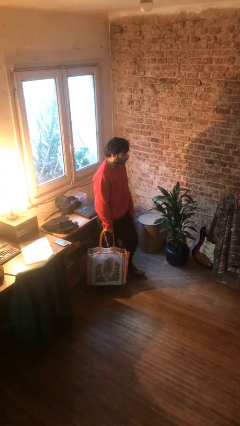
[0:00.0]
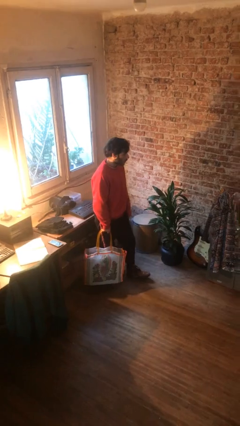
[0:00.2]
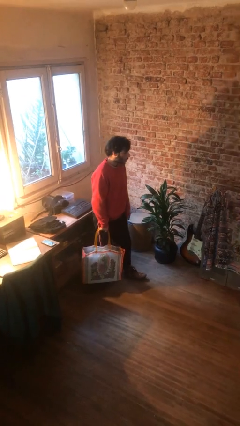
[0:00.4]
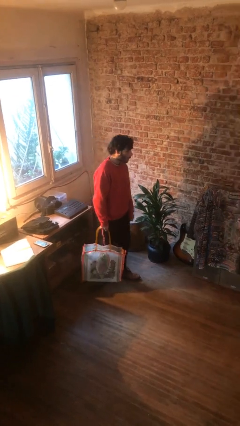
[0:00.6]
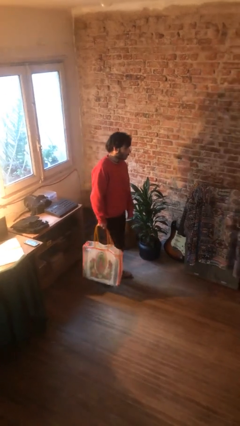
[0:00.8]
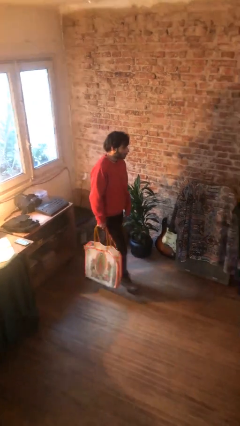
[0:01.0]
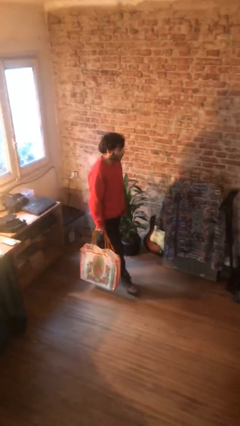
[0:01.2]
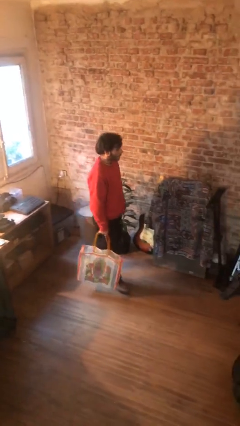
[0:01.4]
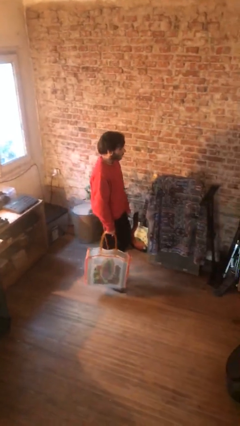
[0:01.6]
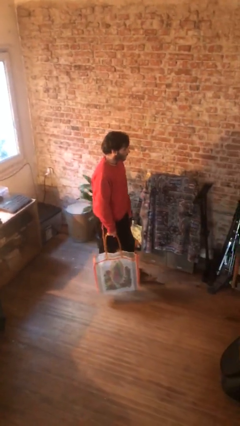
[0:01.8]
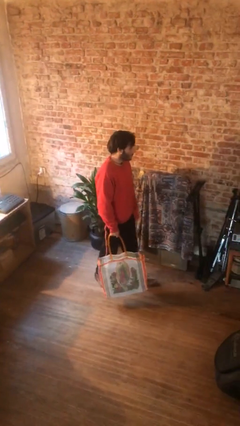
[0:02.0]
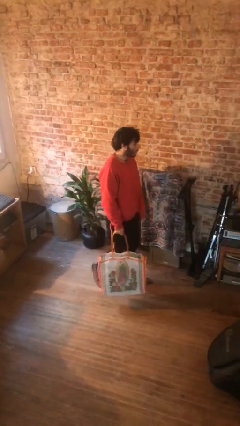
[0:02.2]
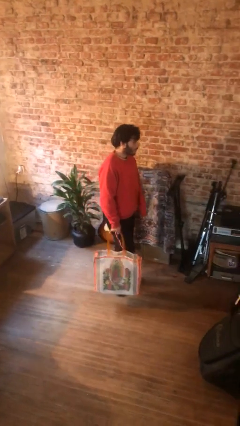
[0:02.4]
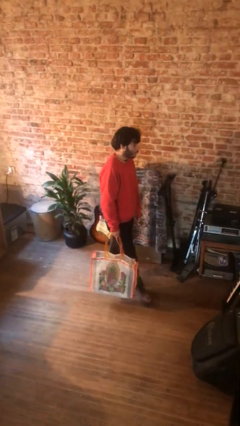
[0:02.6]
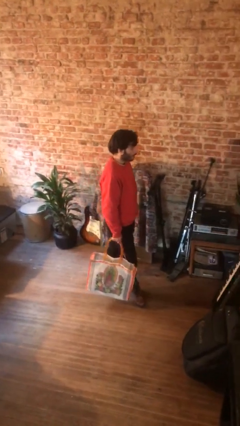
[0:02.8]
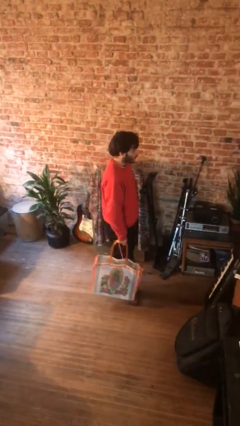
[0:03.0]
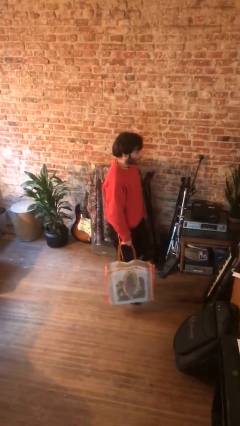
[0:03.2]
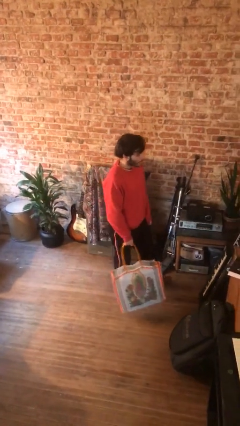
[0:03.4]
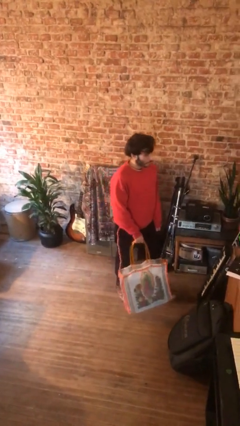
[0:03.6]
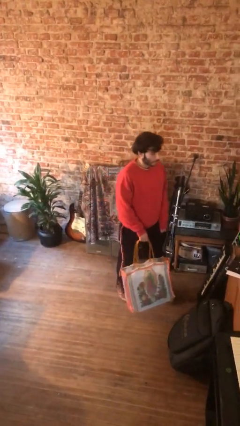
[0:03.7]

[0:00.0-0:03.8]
person carries groceries

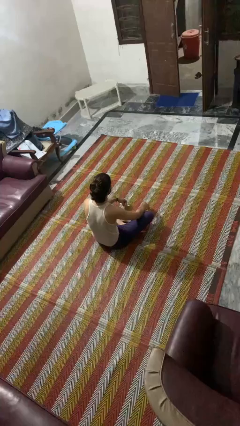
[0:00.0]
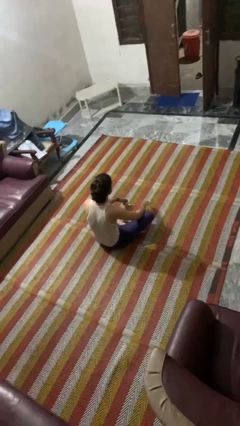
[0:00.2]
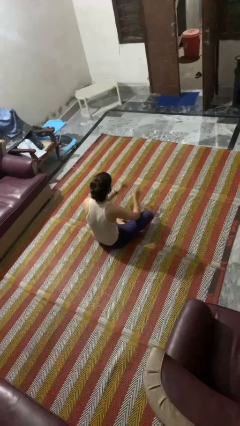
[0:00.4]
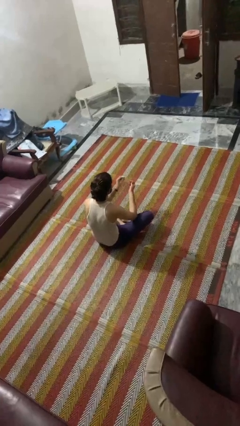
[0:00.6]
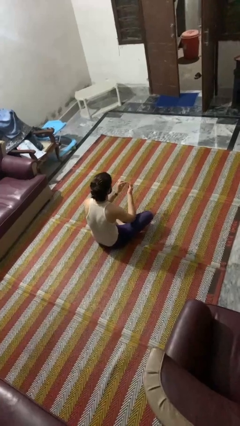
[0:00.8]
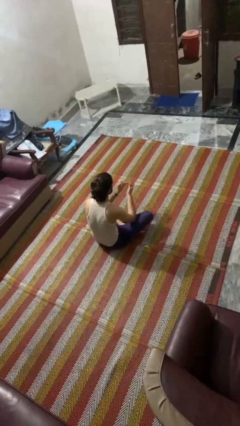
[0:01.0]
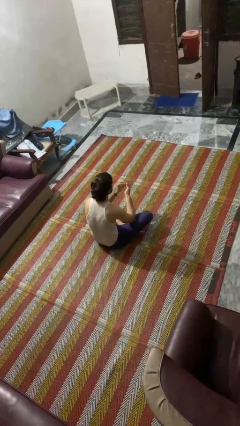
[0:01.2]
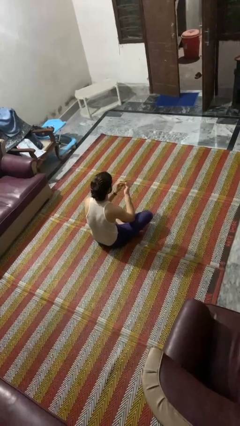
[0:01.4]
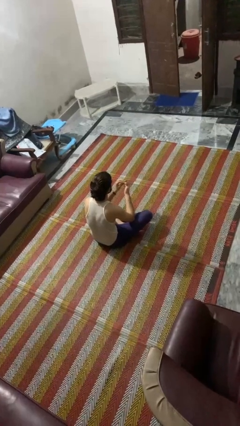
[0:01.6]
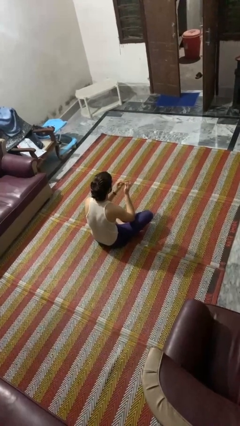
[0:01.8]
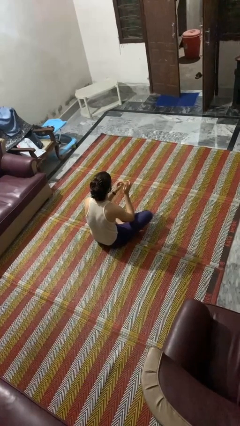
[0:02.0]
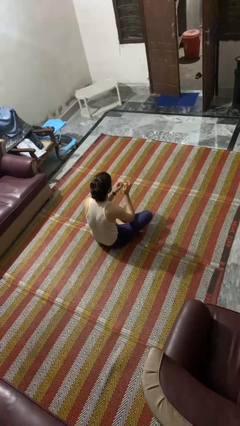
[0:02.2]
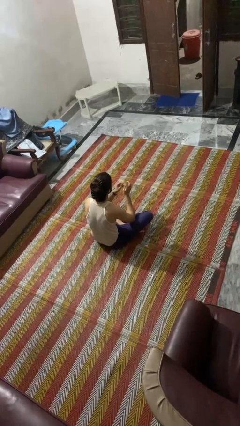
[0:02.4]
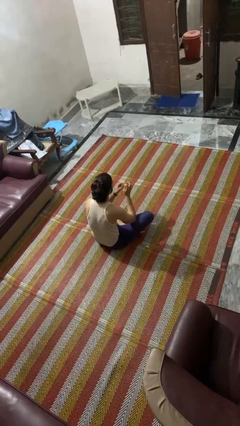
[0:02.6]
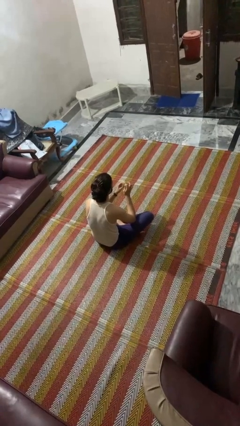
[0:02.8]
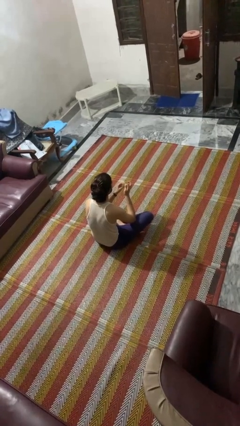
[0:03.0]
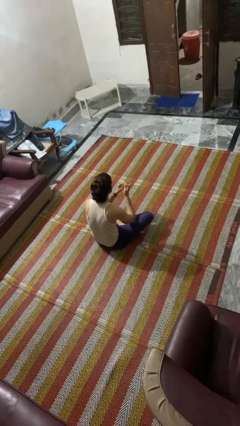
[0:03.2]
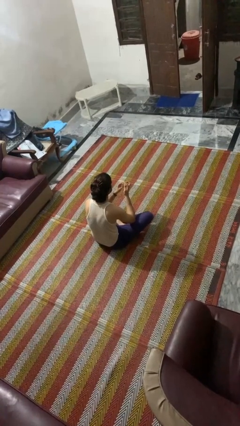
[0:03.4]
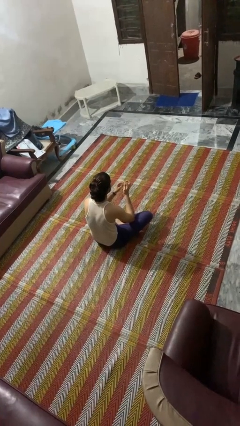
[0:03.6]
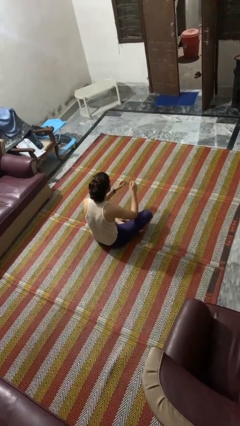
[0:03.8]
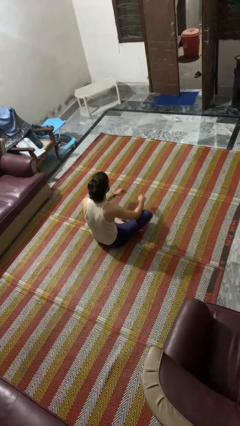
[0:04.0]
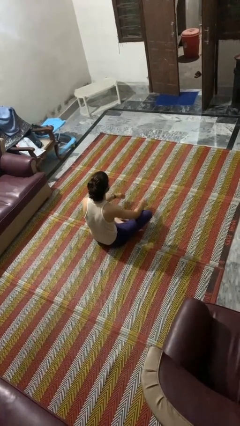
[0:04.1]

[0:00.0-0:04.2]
person files fingernails

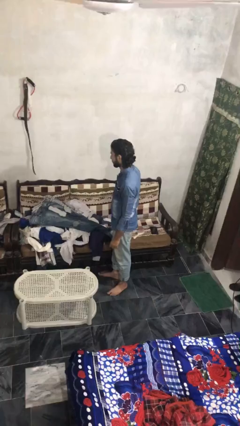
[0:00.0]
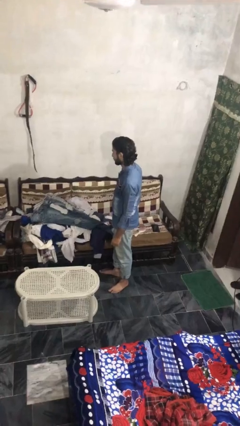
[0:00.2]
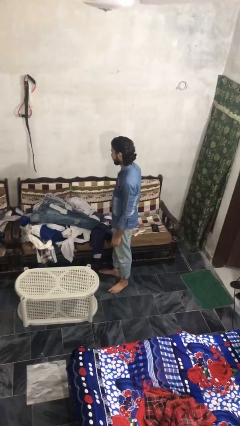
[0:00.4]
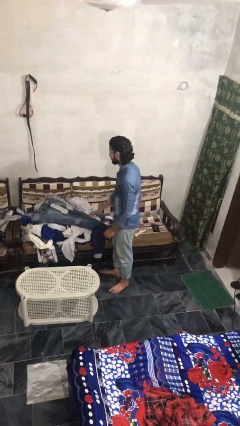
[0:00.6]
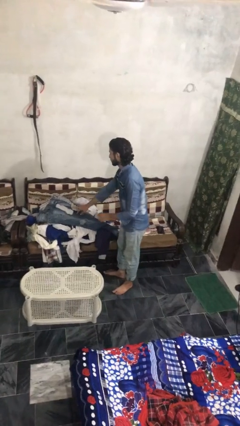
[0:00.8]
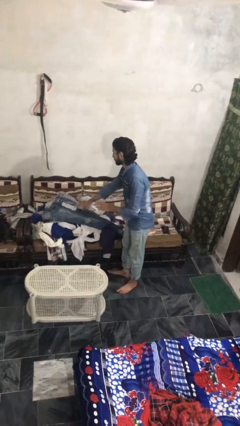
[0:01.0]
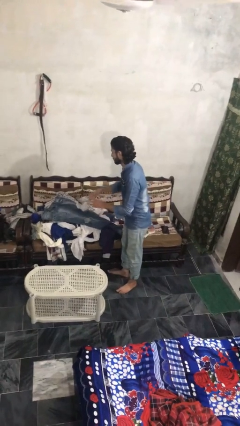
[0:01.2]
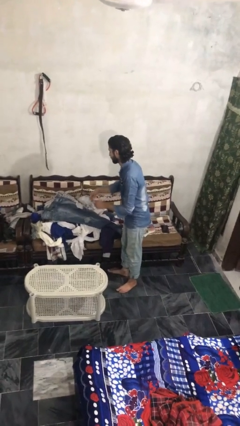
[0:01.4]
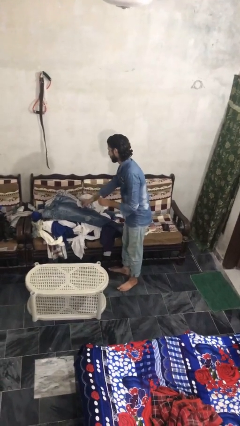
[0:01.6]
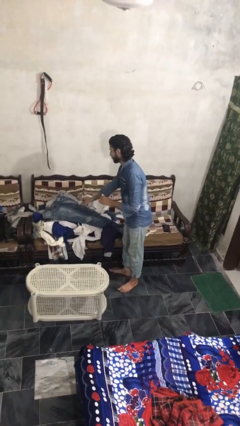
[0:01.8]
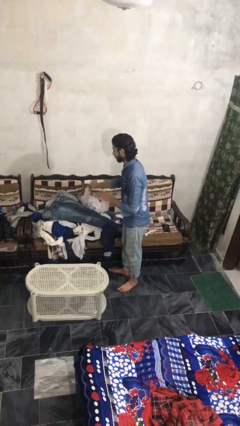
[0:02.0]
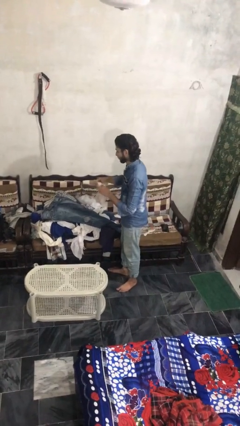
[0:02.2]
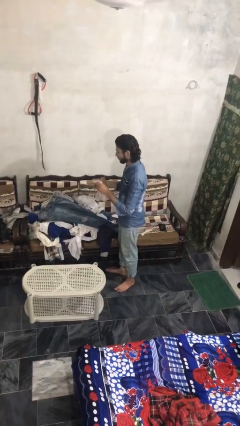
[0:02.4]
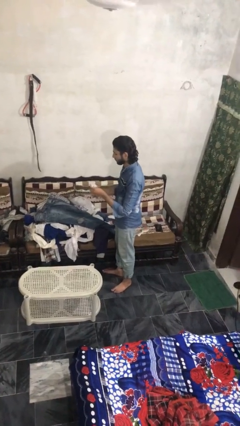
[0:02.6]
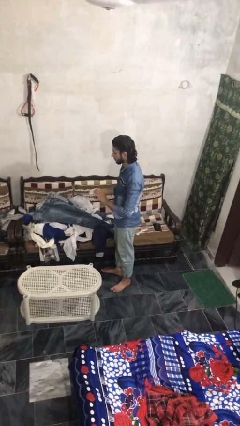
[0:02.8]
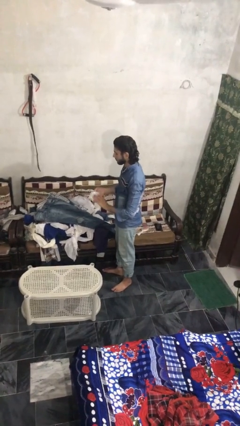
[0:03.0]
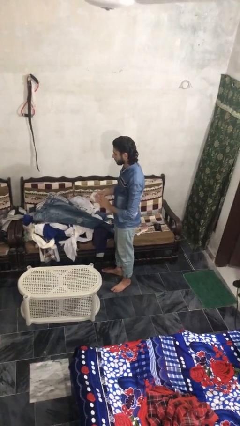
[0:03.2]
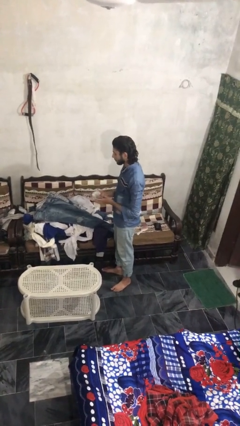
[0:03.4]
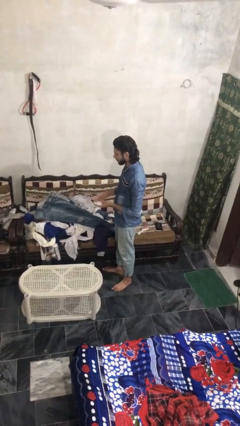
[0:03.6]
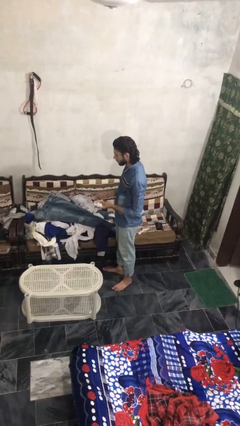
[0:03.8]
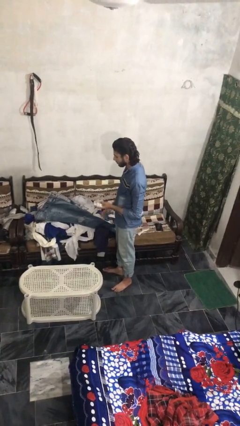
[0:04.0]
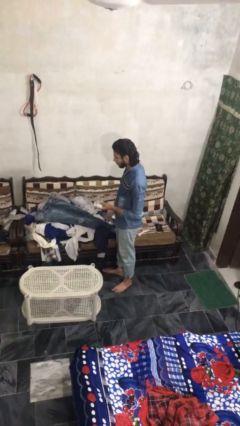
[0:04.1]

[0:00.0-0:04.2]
person folds socks

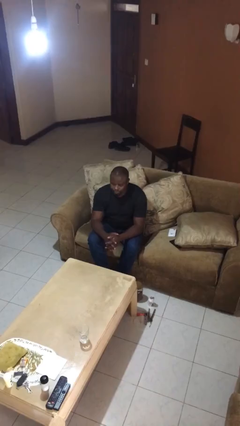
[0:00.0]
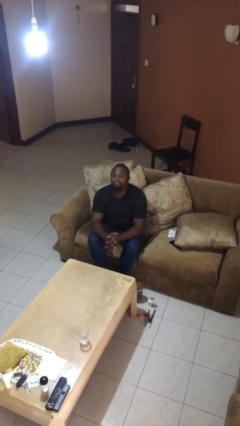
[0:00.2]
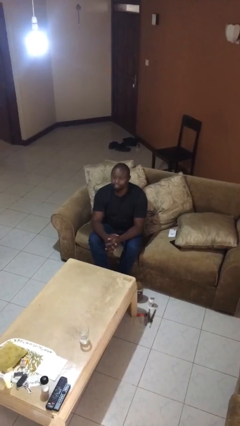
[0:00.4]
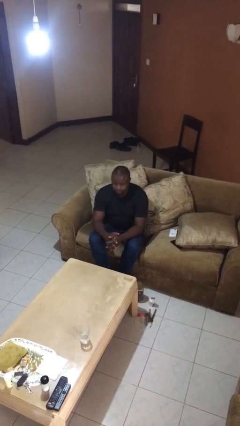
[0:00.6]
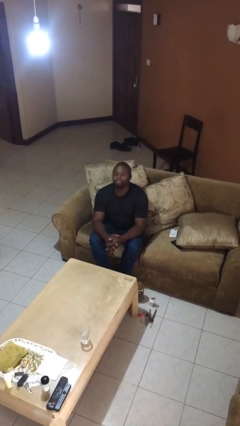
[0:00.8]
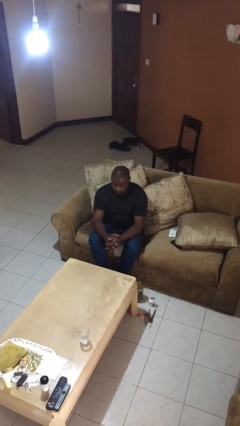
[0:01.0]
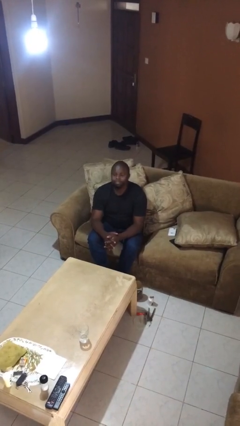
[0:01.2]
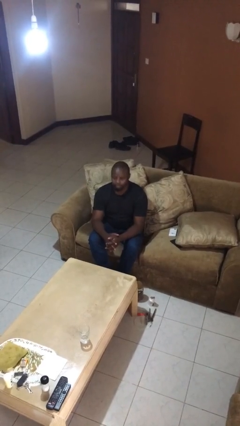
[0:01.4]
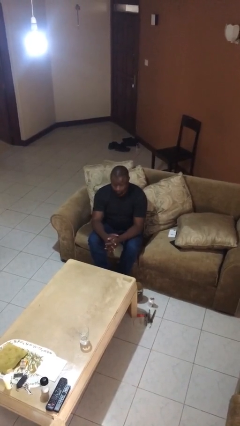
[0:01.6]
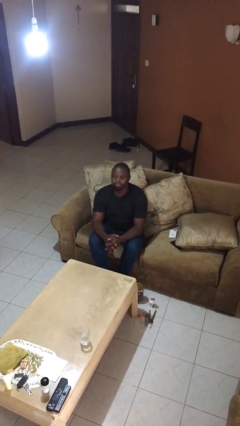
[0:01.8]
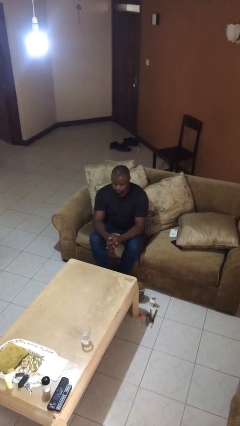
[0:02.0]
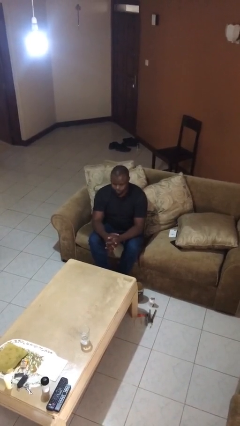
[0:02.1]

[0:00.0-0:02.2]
person nods head

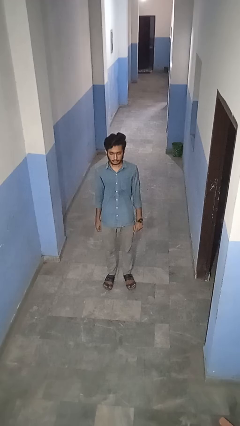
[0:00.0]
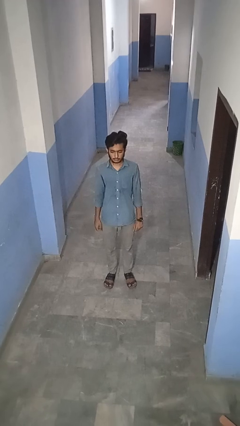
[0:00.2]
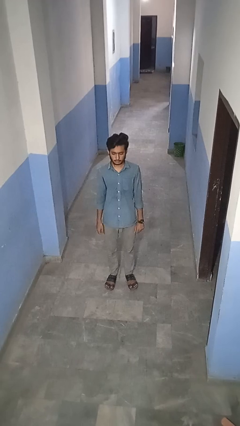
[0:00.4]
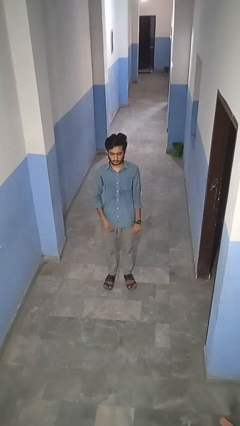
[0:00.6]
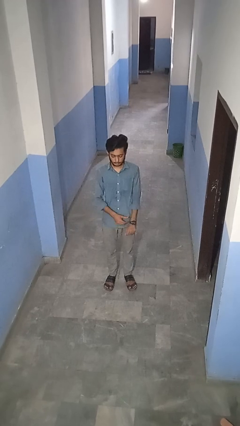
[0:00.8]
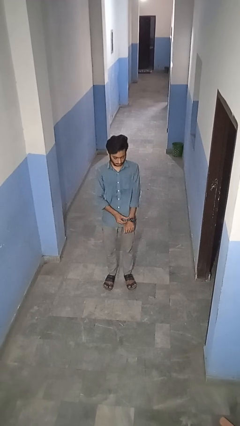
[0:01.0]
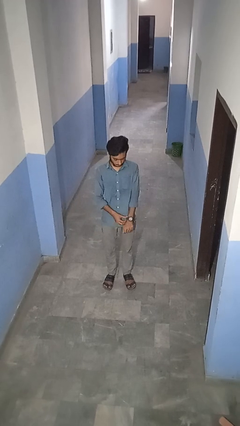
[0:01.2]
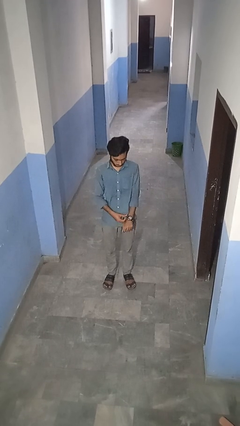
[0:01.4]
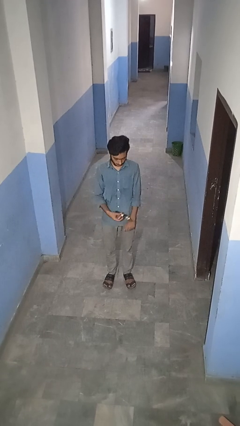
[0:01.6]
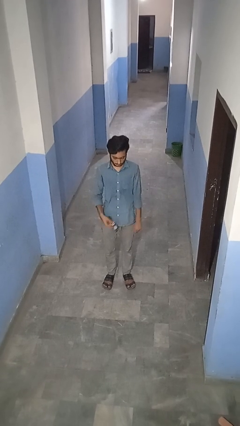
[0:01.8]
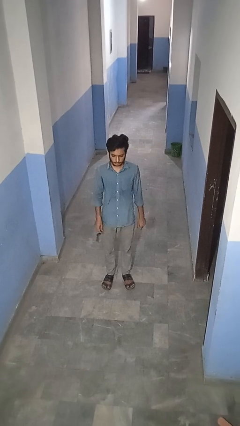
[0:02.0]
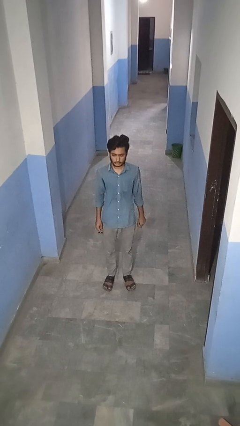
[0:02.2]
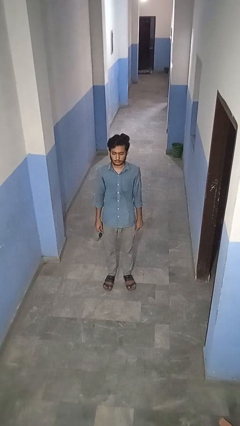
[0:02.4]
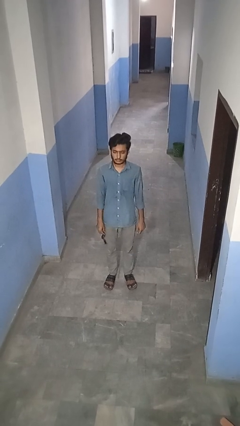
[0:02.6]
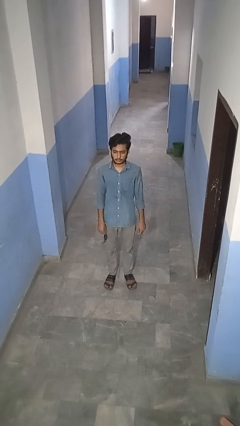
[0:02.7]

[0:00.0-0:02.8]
person takes off wristwatch

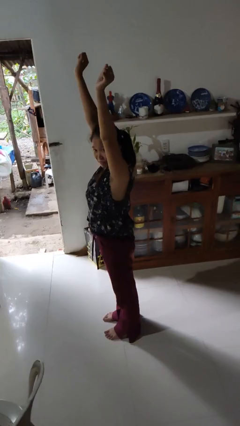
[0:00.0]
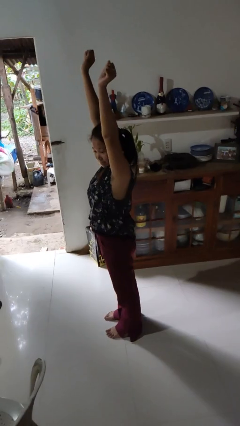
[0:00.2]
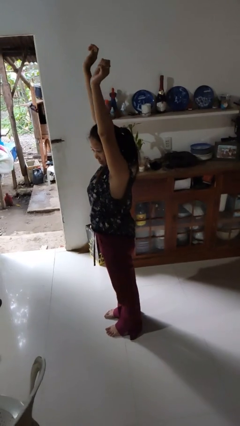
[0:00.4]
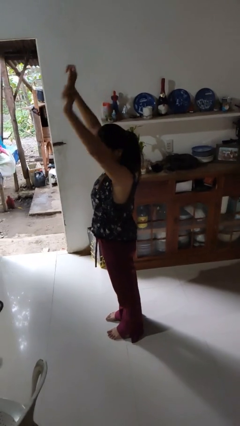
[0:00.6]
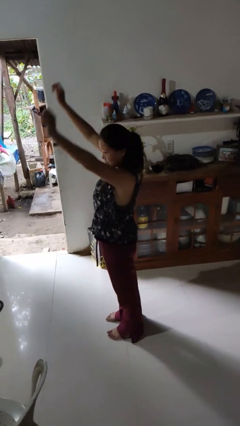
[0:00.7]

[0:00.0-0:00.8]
person stretches arms over head
